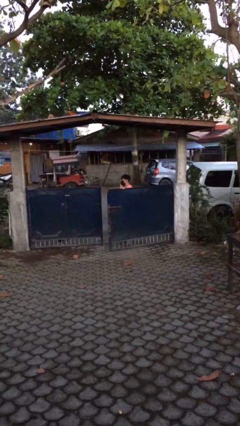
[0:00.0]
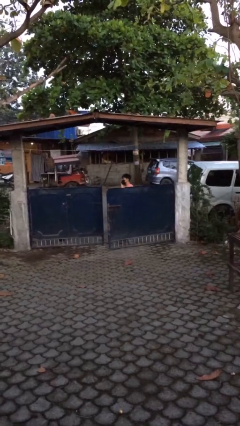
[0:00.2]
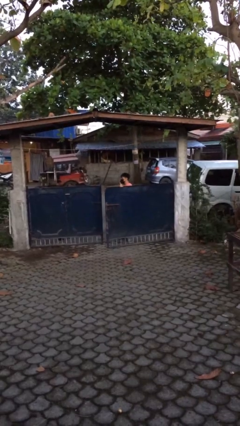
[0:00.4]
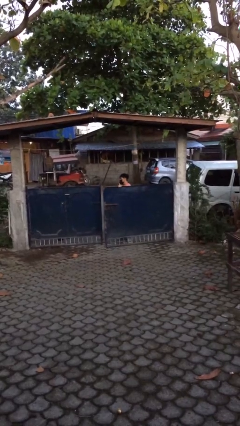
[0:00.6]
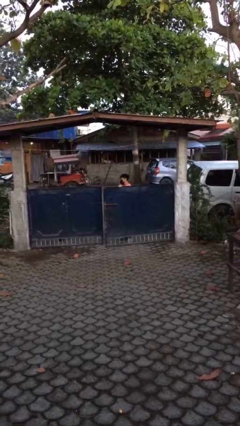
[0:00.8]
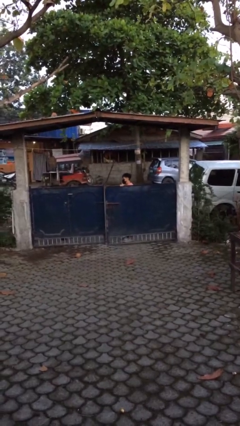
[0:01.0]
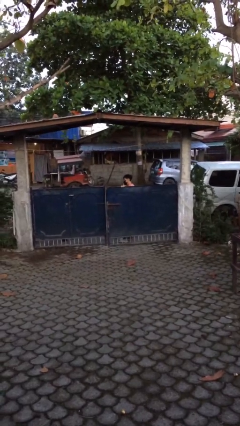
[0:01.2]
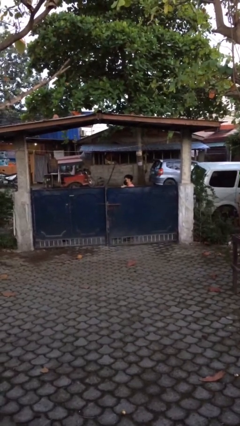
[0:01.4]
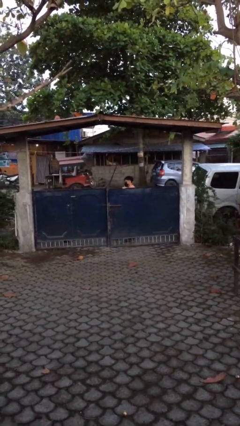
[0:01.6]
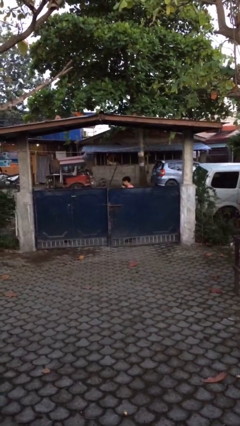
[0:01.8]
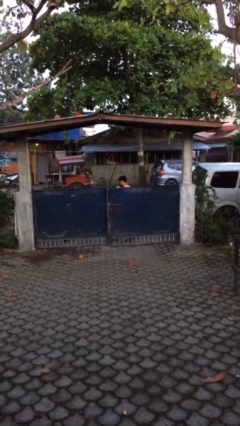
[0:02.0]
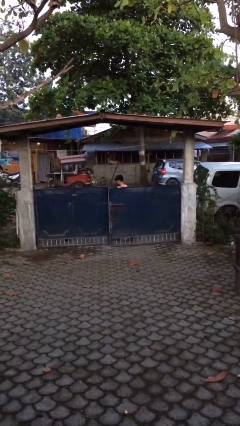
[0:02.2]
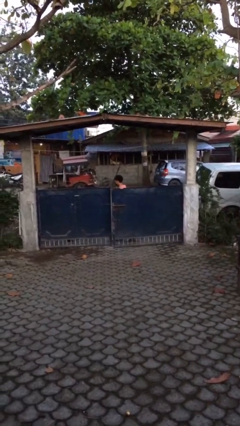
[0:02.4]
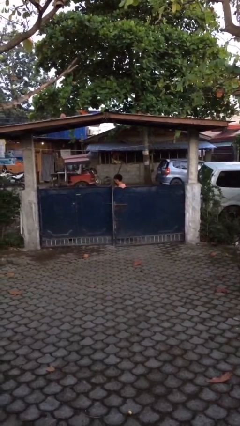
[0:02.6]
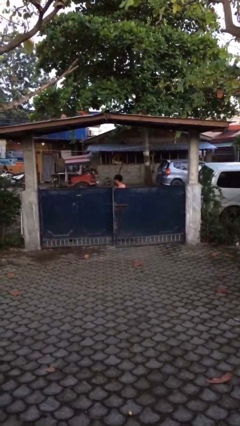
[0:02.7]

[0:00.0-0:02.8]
person closes facility door

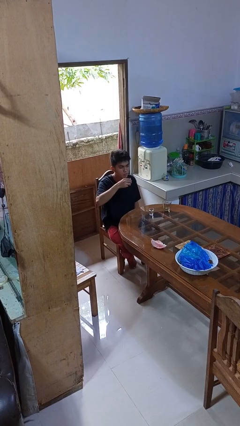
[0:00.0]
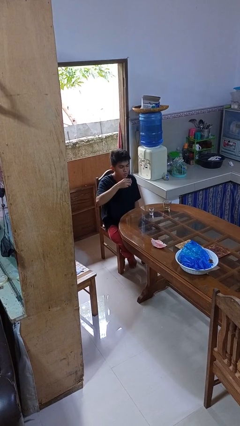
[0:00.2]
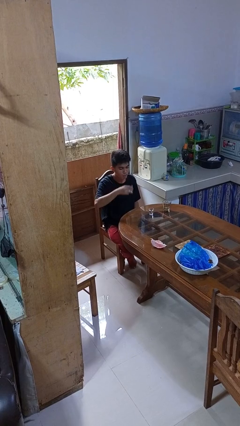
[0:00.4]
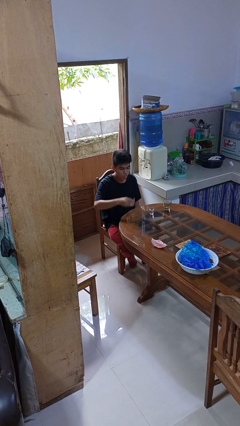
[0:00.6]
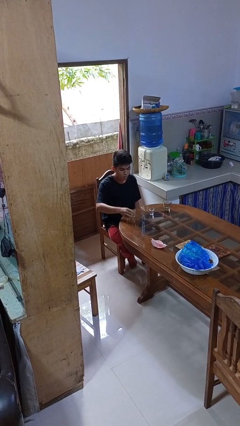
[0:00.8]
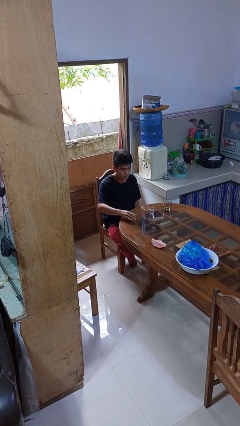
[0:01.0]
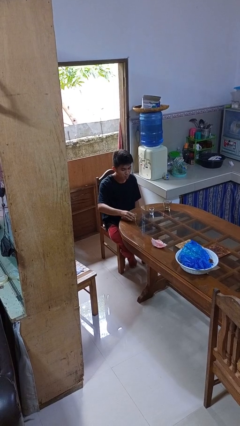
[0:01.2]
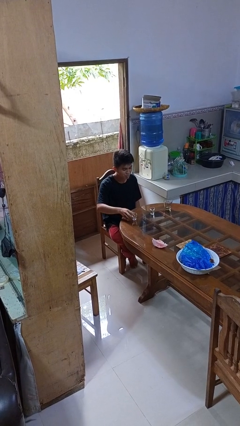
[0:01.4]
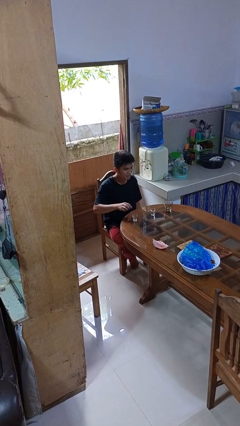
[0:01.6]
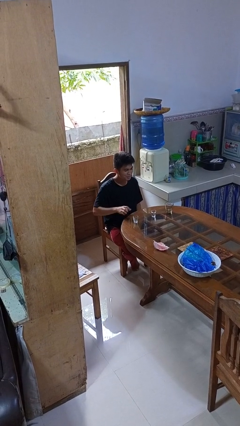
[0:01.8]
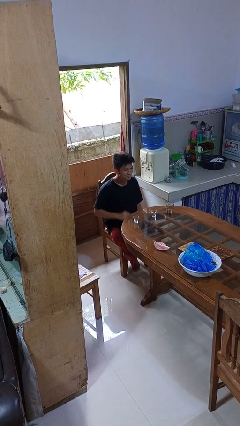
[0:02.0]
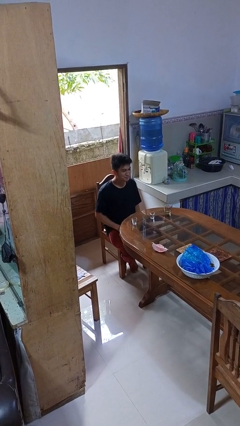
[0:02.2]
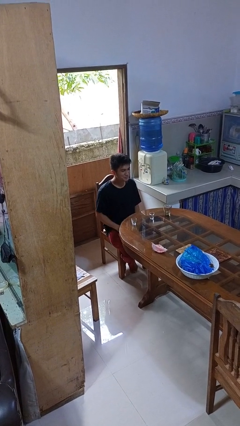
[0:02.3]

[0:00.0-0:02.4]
person puts down object on table

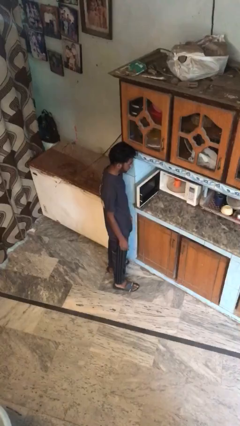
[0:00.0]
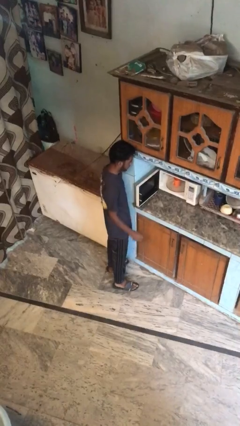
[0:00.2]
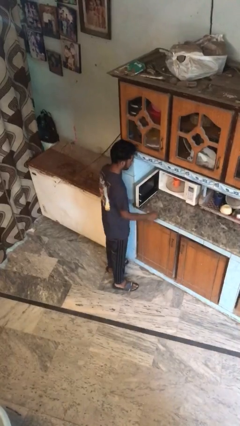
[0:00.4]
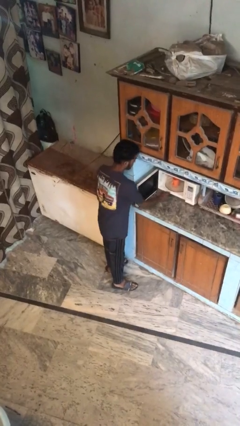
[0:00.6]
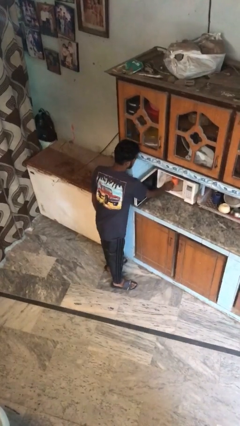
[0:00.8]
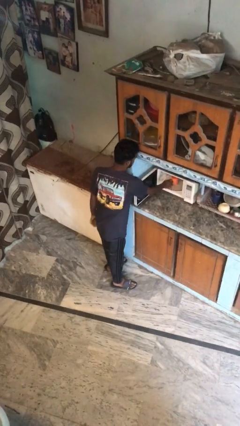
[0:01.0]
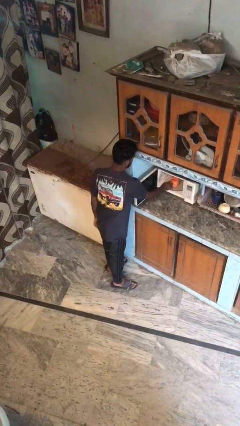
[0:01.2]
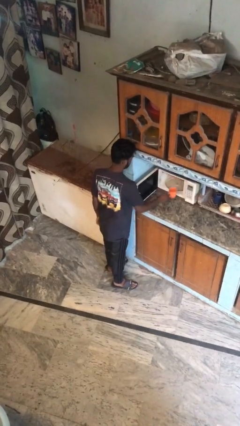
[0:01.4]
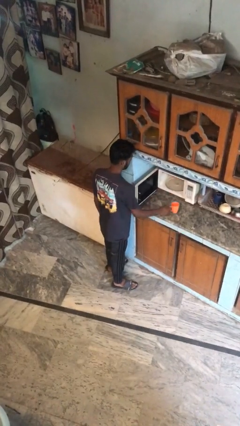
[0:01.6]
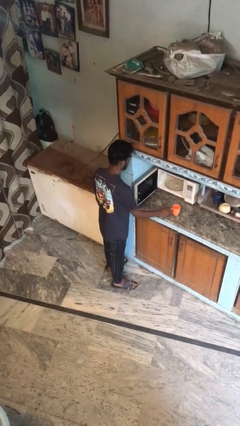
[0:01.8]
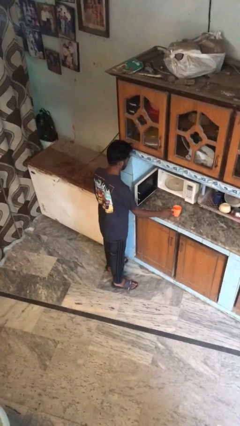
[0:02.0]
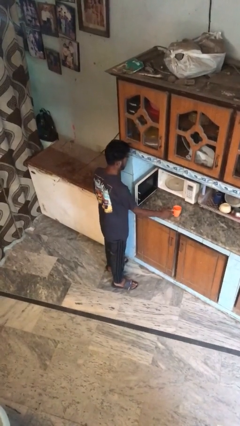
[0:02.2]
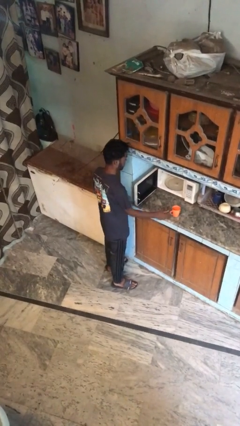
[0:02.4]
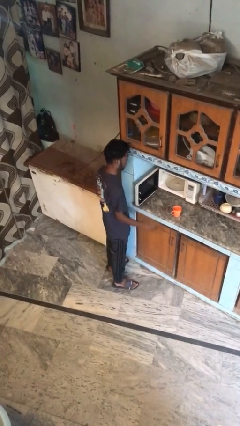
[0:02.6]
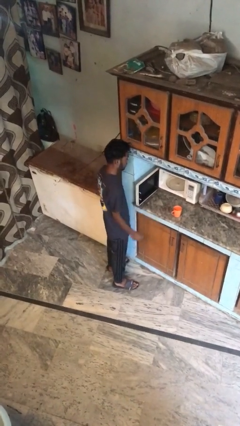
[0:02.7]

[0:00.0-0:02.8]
person takes object from microwave

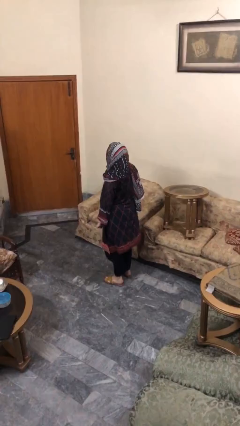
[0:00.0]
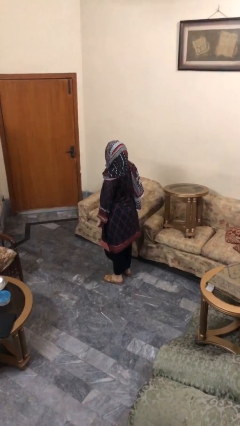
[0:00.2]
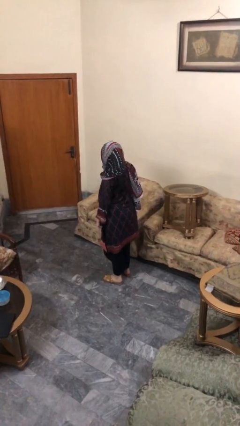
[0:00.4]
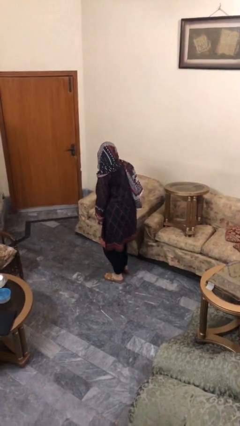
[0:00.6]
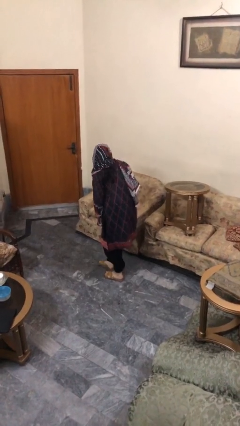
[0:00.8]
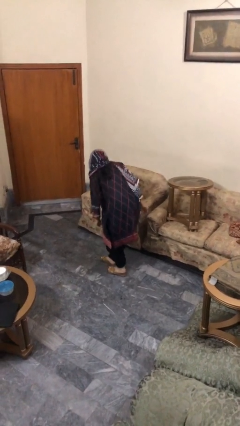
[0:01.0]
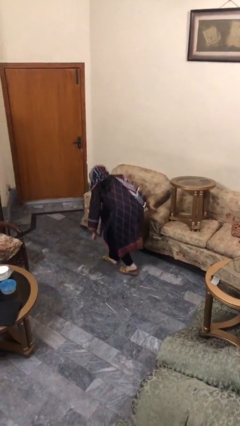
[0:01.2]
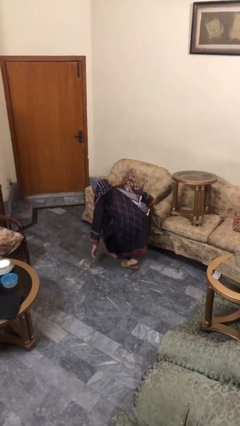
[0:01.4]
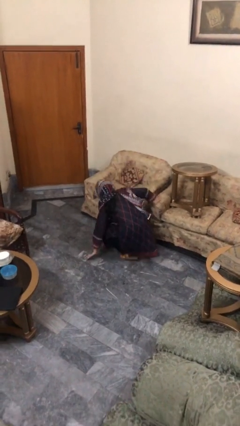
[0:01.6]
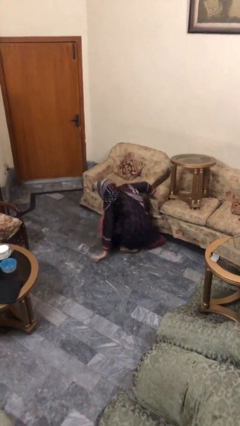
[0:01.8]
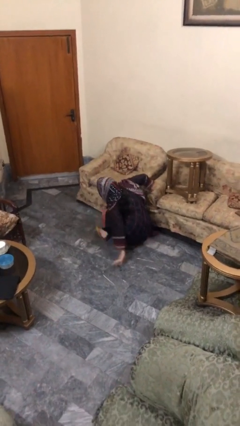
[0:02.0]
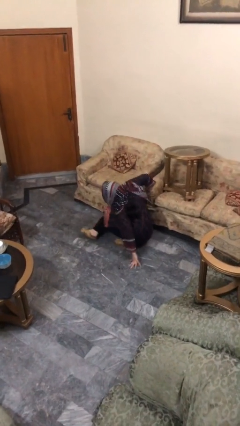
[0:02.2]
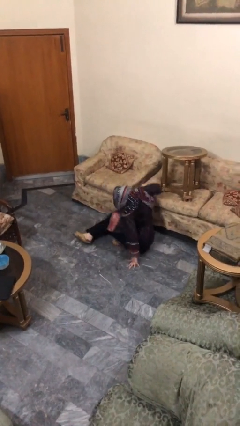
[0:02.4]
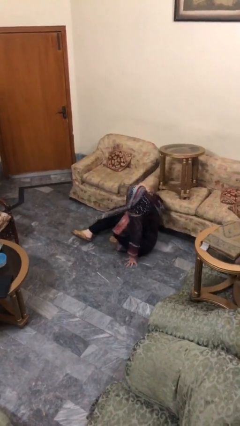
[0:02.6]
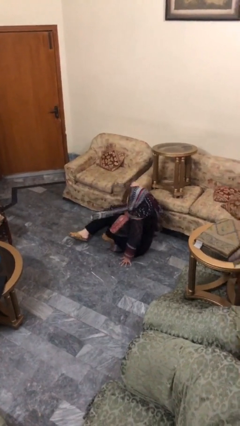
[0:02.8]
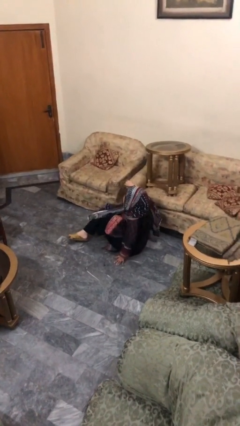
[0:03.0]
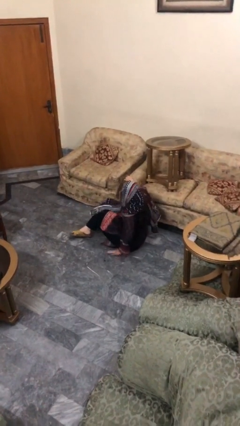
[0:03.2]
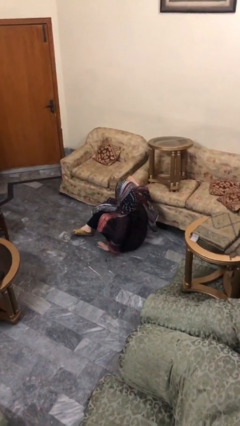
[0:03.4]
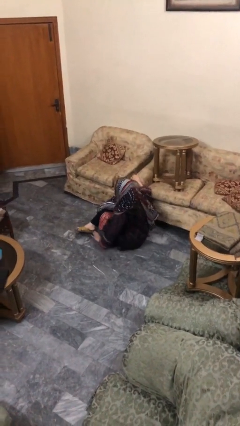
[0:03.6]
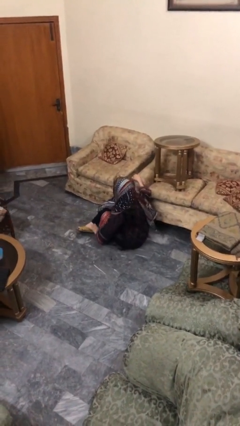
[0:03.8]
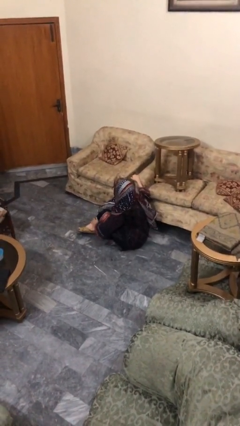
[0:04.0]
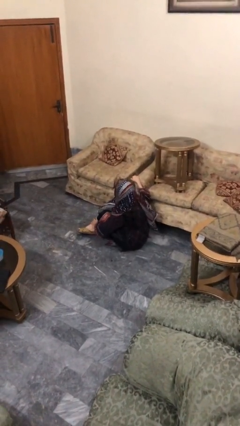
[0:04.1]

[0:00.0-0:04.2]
person sits crisscross

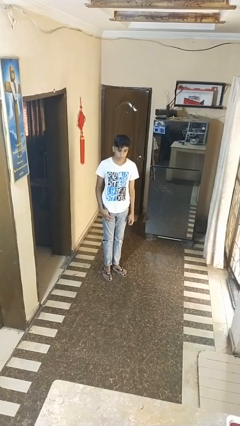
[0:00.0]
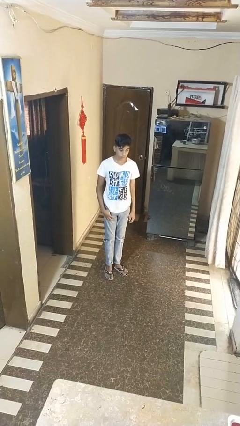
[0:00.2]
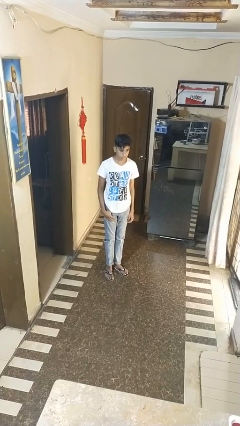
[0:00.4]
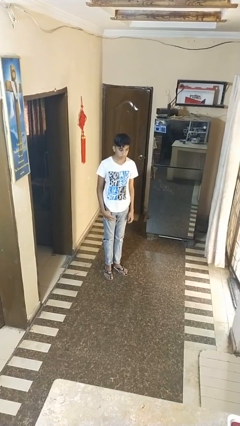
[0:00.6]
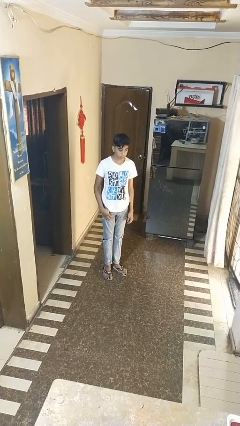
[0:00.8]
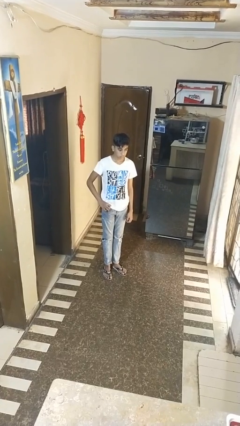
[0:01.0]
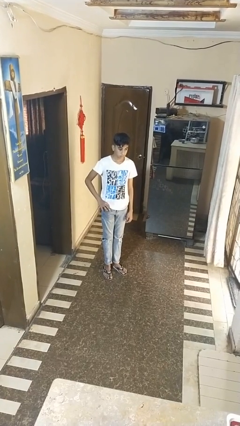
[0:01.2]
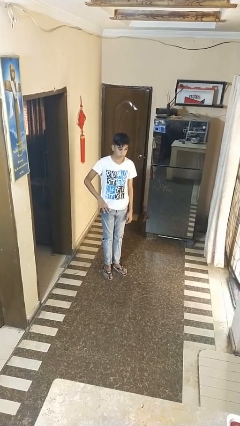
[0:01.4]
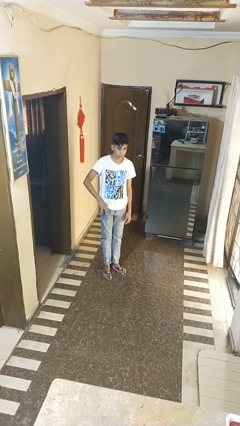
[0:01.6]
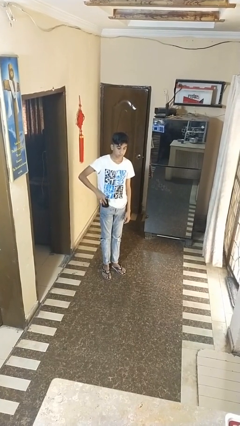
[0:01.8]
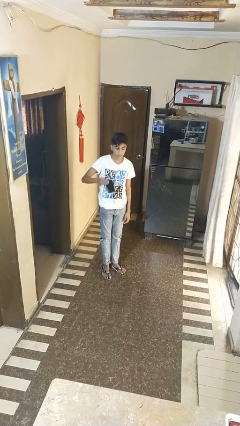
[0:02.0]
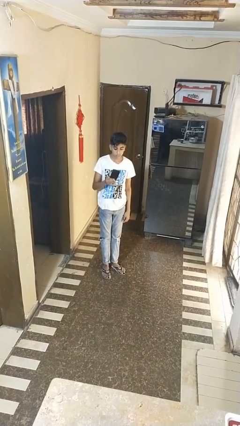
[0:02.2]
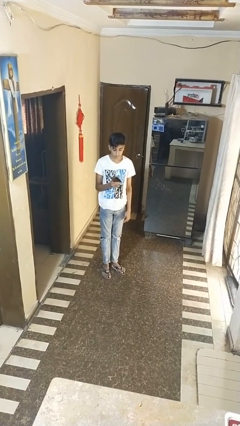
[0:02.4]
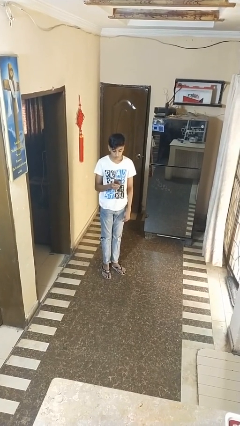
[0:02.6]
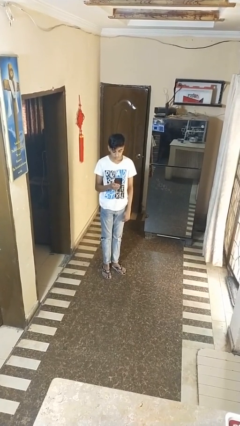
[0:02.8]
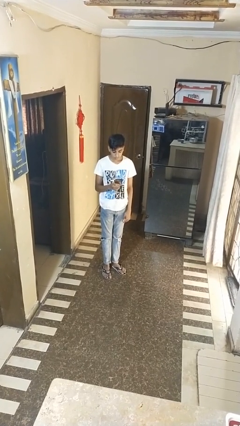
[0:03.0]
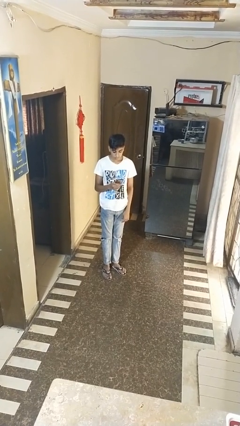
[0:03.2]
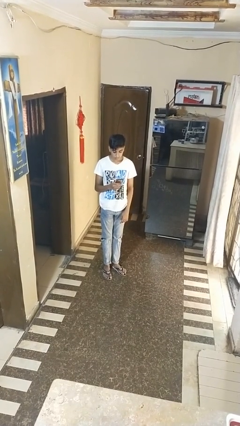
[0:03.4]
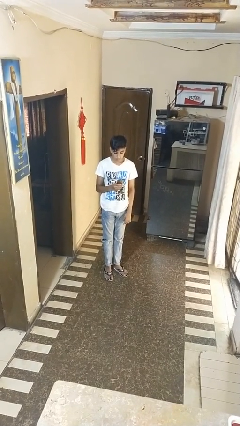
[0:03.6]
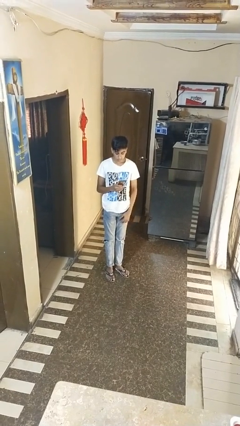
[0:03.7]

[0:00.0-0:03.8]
person takes phone from pocket

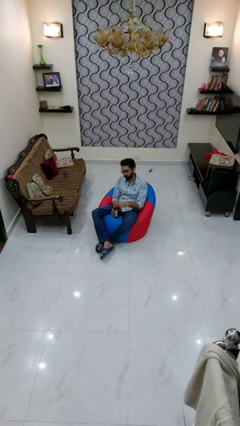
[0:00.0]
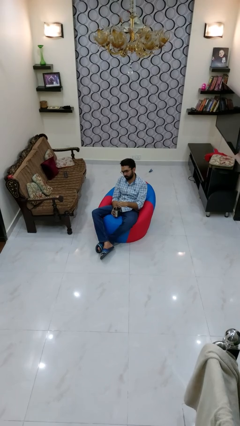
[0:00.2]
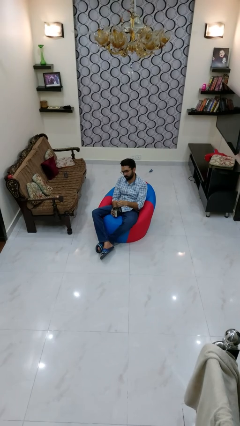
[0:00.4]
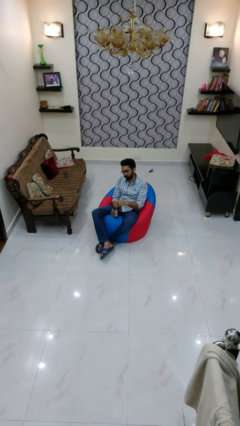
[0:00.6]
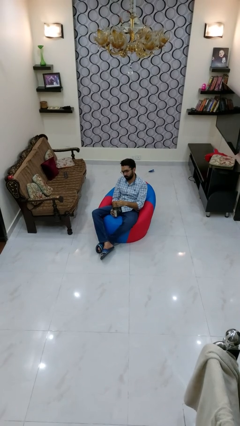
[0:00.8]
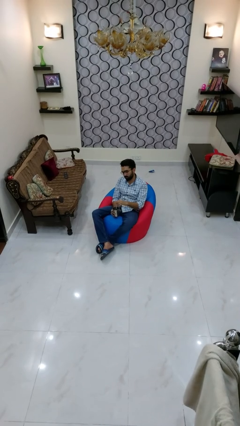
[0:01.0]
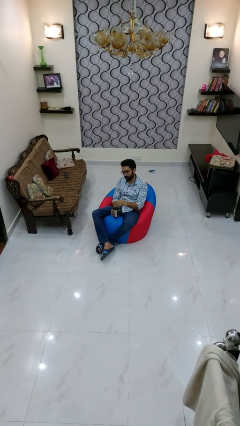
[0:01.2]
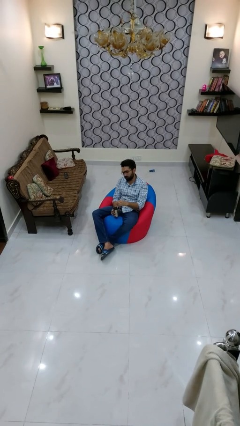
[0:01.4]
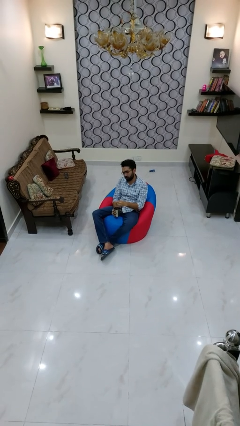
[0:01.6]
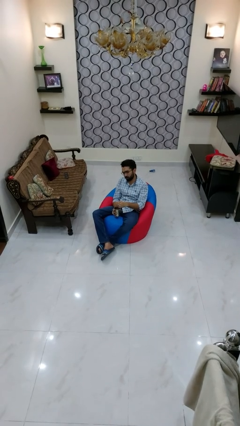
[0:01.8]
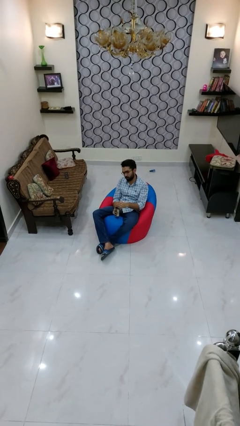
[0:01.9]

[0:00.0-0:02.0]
person stirs mug
